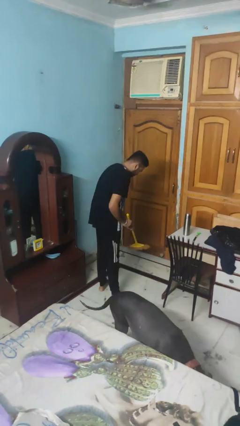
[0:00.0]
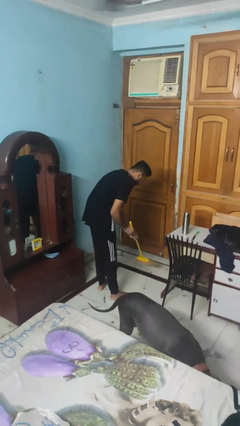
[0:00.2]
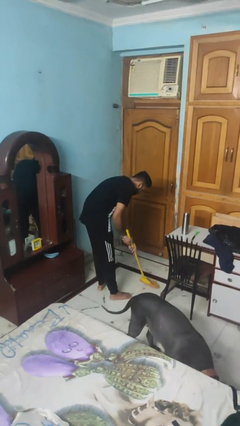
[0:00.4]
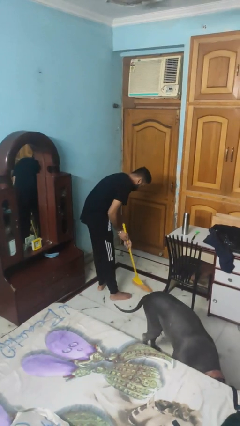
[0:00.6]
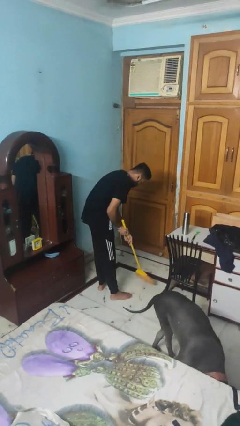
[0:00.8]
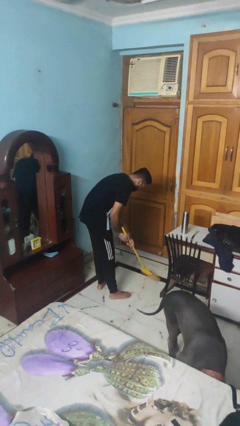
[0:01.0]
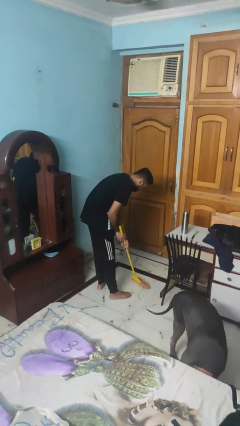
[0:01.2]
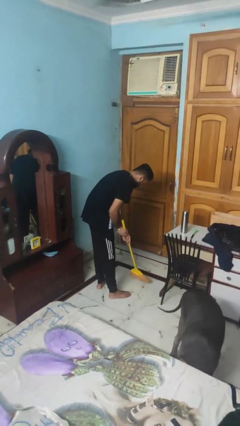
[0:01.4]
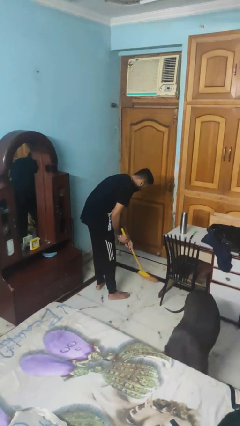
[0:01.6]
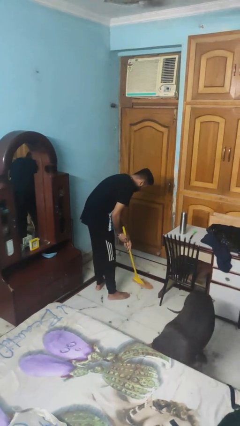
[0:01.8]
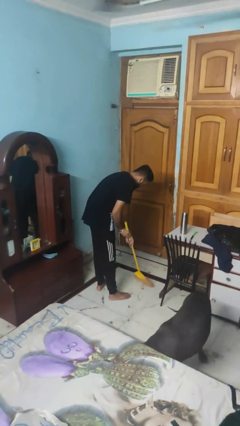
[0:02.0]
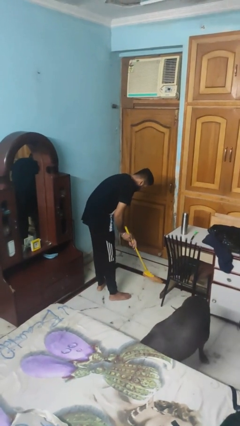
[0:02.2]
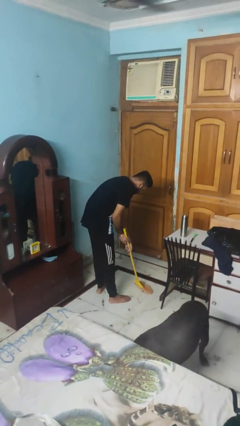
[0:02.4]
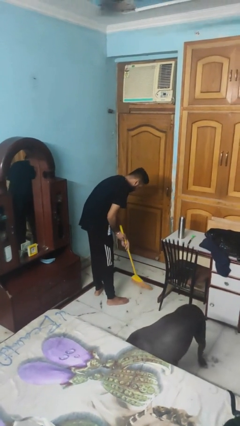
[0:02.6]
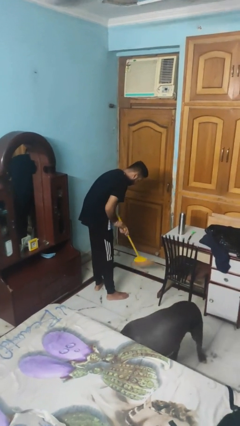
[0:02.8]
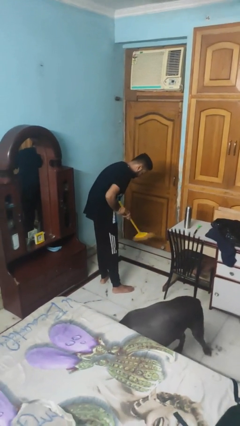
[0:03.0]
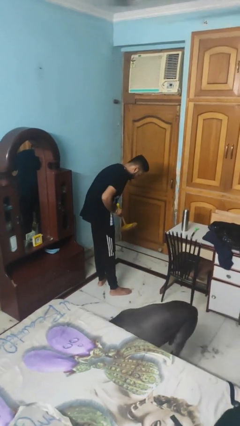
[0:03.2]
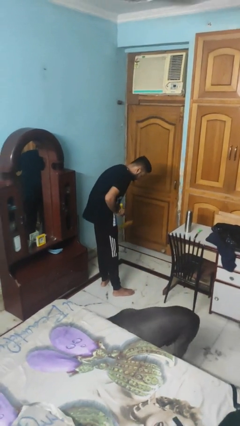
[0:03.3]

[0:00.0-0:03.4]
person sweeps floor

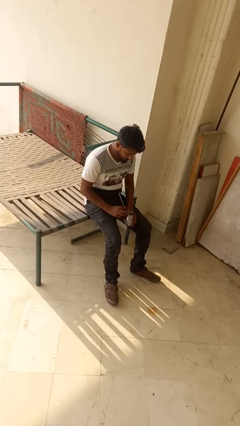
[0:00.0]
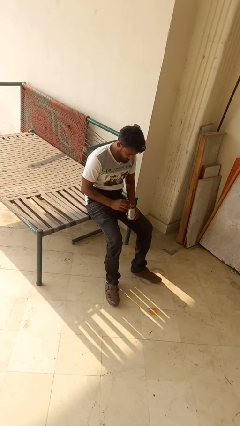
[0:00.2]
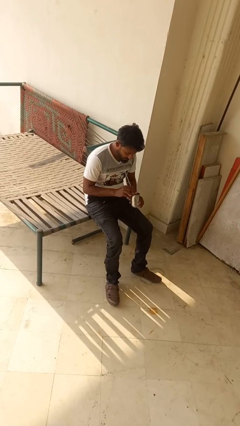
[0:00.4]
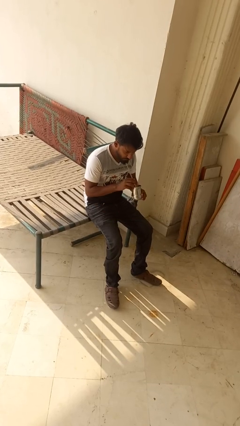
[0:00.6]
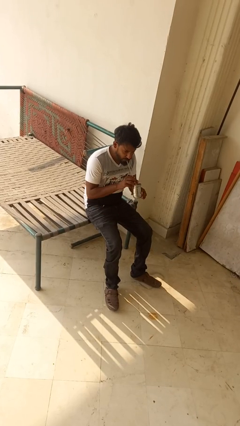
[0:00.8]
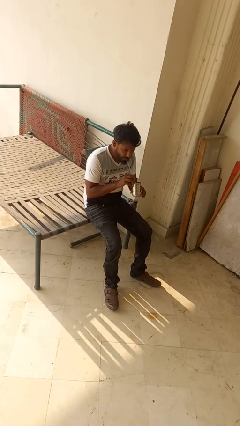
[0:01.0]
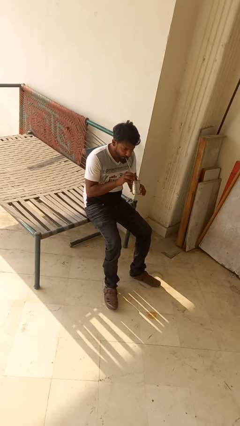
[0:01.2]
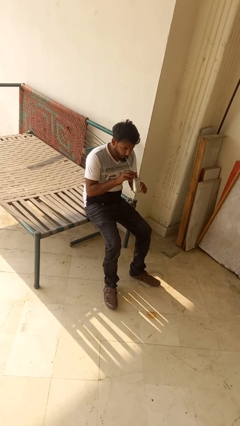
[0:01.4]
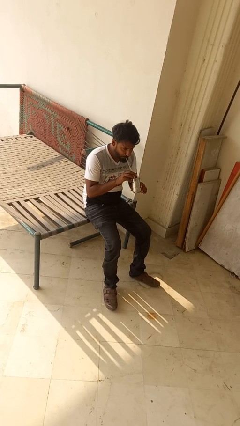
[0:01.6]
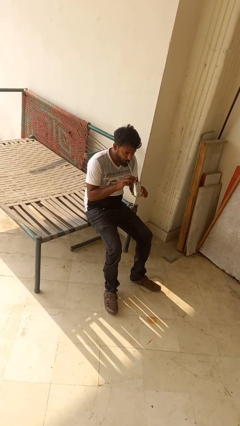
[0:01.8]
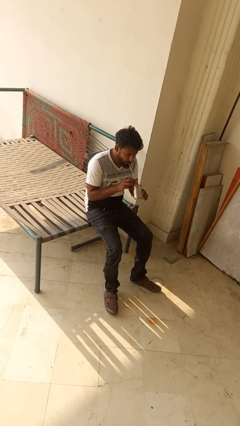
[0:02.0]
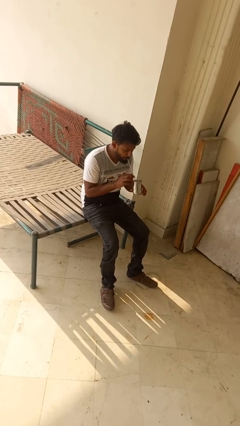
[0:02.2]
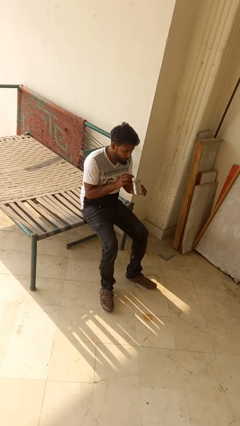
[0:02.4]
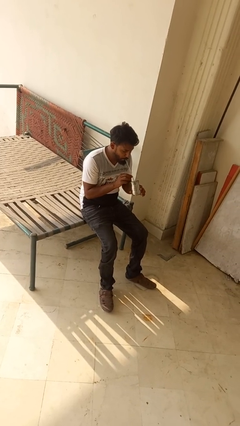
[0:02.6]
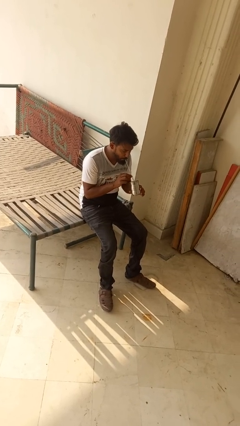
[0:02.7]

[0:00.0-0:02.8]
person drinks from straw

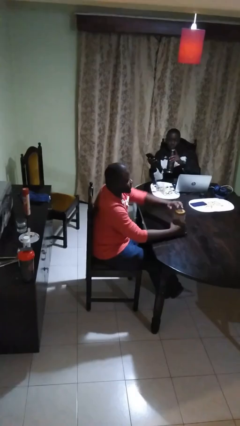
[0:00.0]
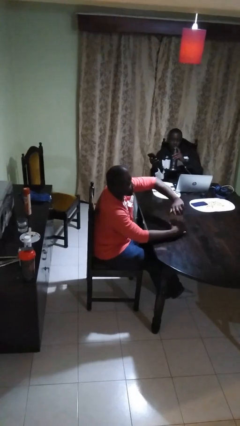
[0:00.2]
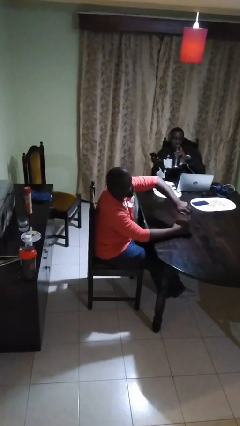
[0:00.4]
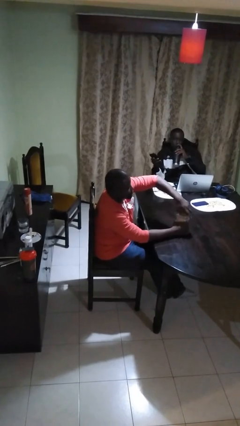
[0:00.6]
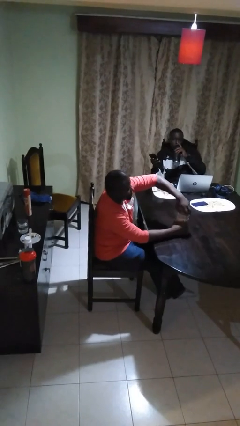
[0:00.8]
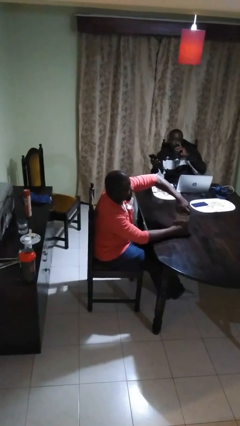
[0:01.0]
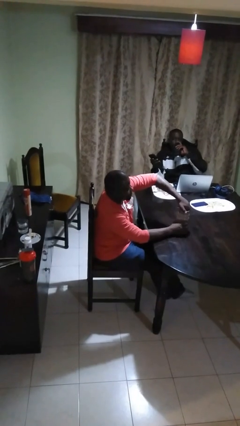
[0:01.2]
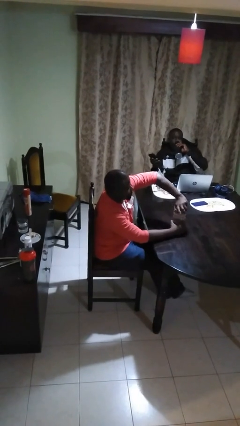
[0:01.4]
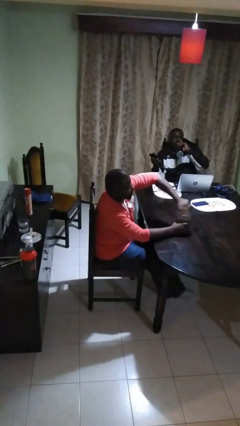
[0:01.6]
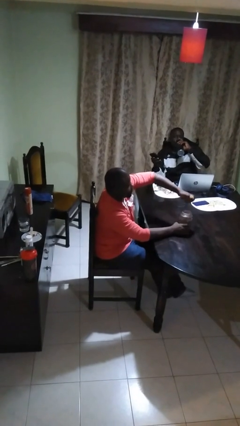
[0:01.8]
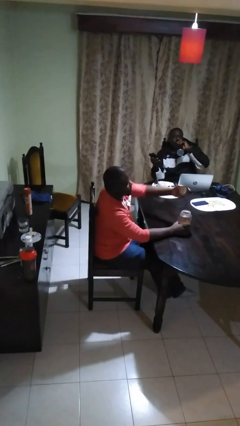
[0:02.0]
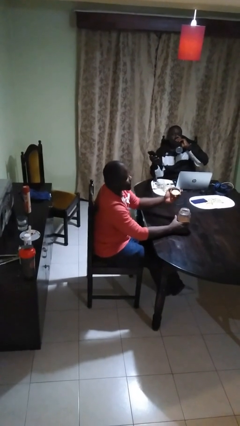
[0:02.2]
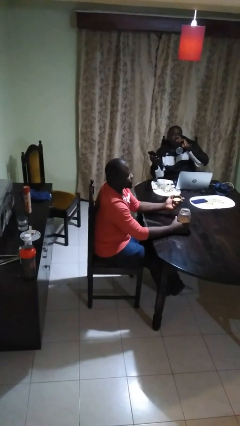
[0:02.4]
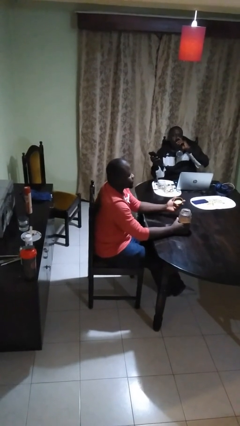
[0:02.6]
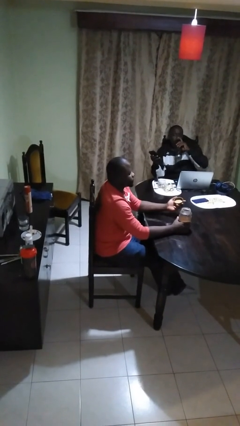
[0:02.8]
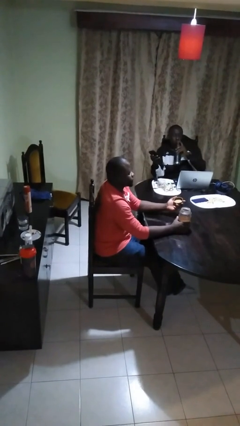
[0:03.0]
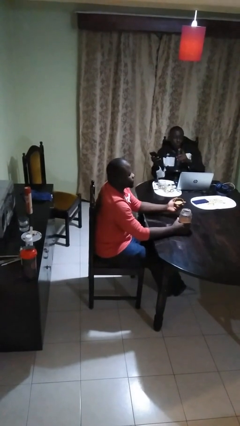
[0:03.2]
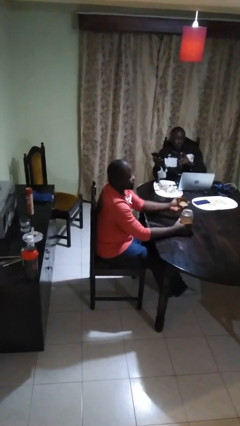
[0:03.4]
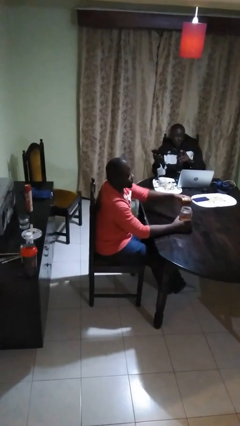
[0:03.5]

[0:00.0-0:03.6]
person opens jar

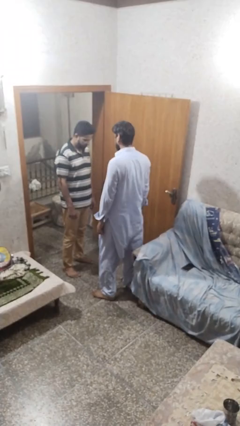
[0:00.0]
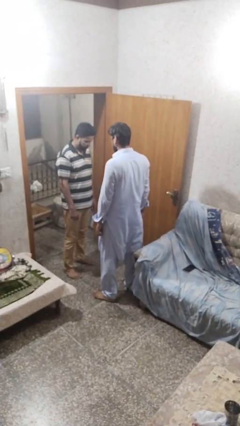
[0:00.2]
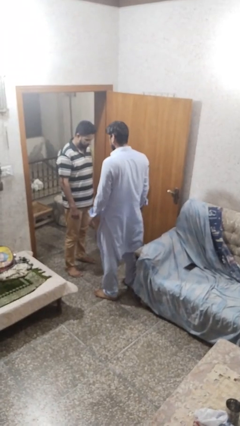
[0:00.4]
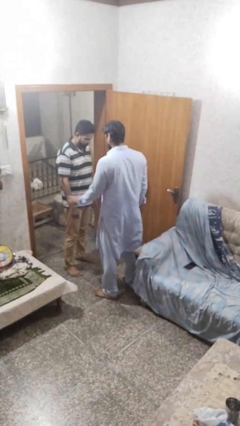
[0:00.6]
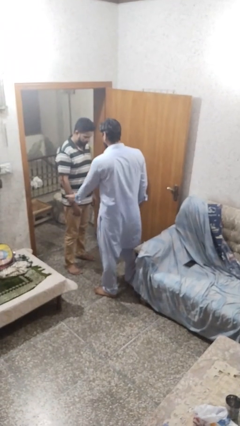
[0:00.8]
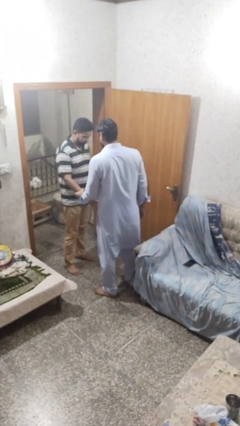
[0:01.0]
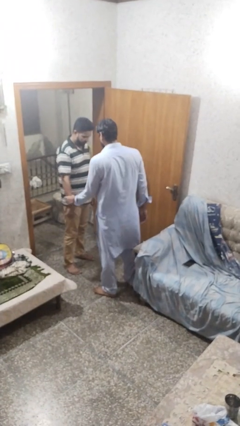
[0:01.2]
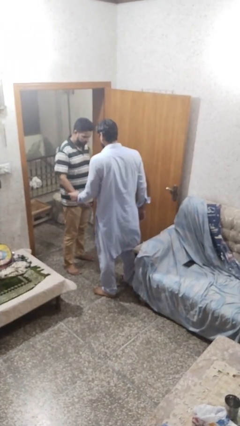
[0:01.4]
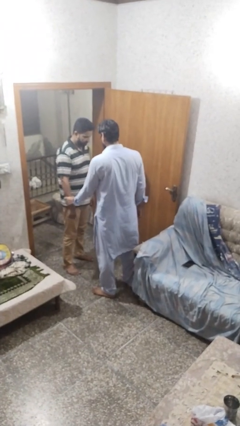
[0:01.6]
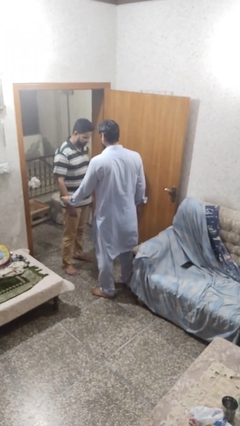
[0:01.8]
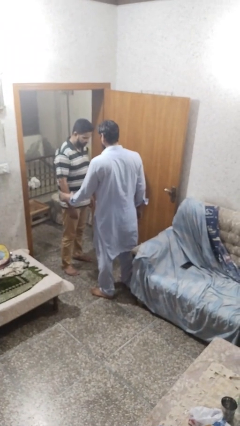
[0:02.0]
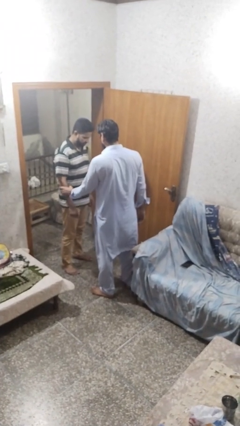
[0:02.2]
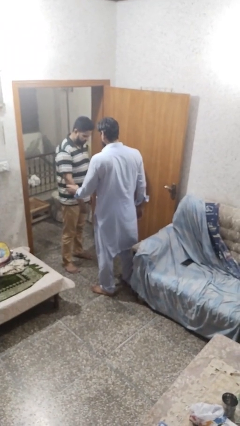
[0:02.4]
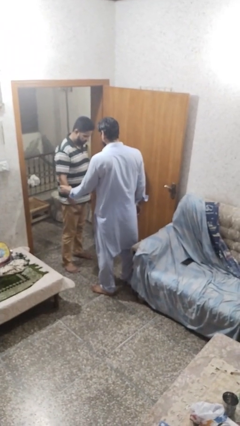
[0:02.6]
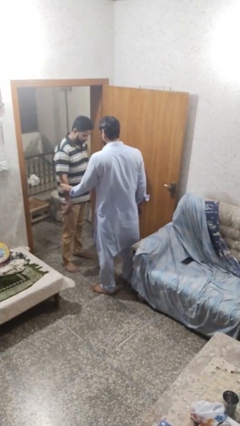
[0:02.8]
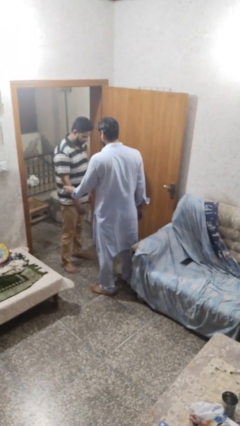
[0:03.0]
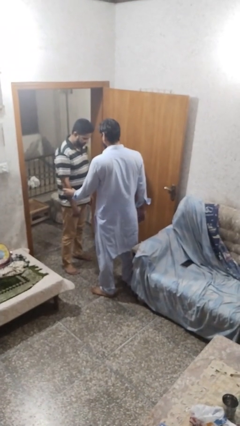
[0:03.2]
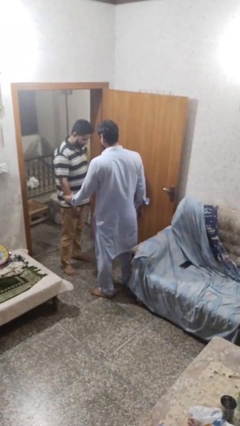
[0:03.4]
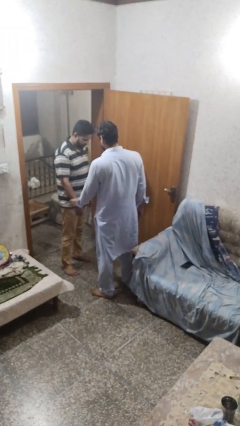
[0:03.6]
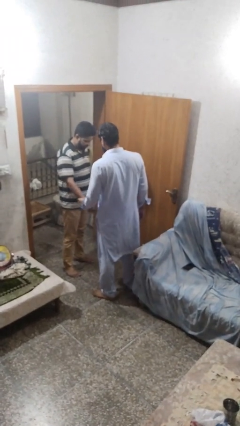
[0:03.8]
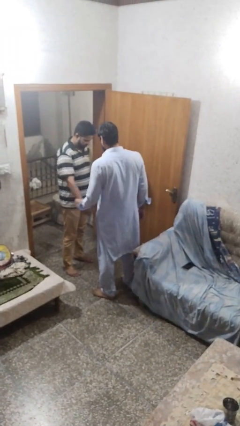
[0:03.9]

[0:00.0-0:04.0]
person grabs person by forearm

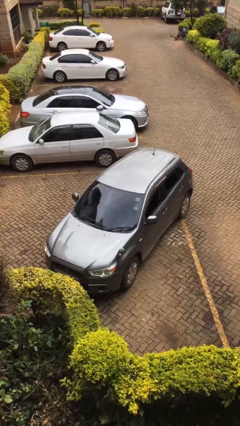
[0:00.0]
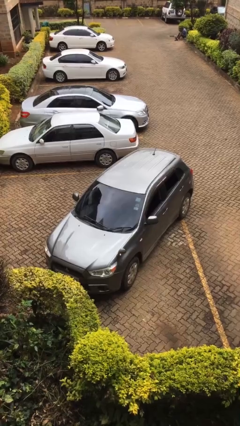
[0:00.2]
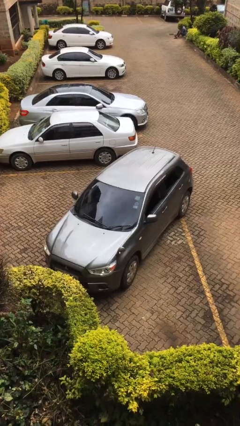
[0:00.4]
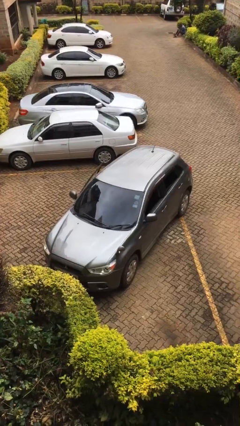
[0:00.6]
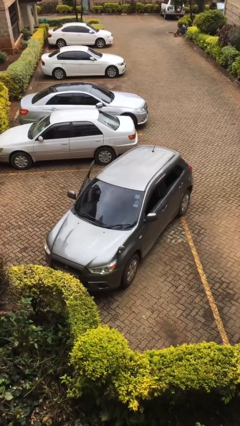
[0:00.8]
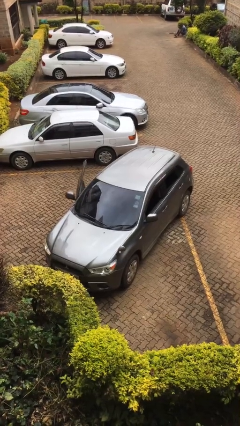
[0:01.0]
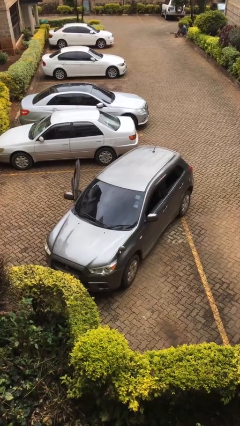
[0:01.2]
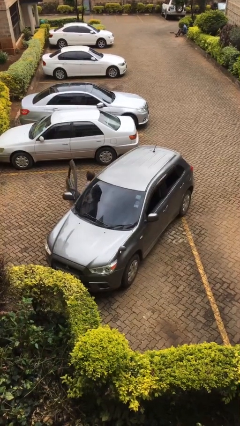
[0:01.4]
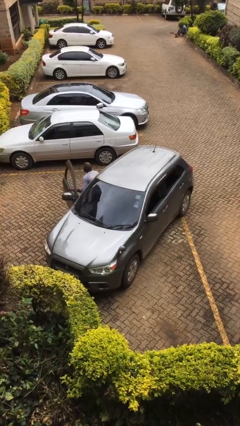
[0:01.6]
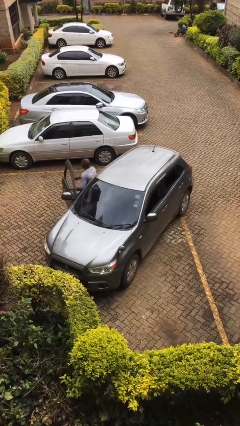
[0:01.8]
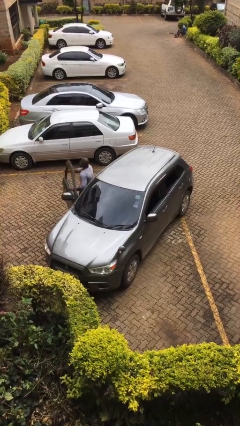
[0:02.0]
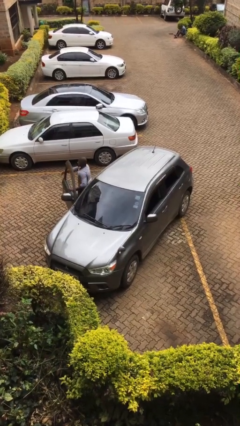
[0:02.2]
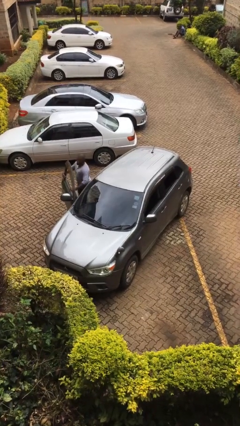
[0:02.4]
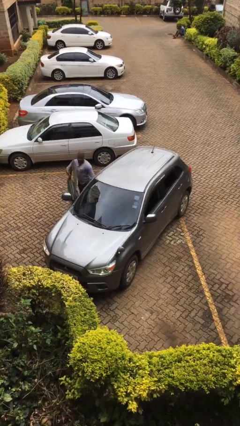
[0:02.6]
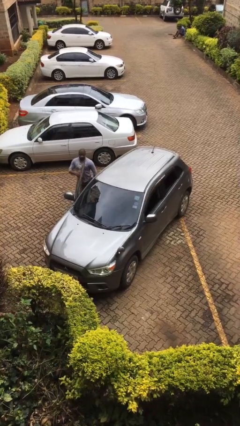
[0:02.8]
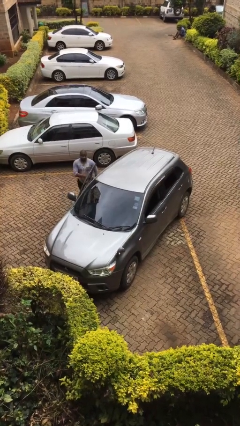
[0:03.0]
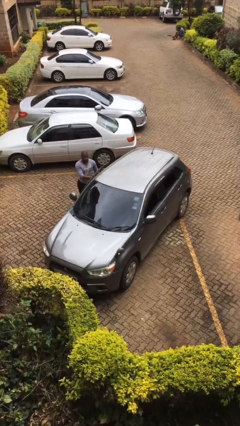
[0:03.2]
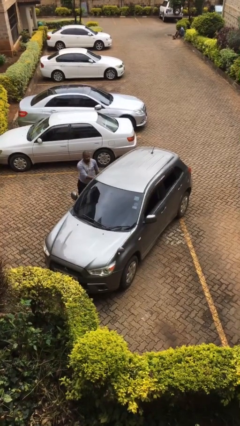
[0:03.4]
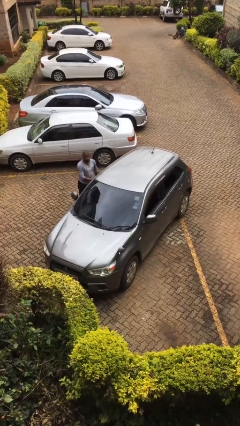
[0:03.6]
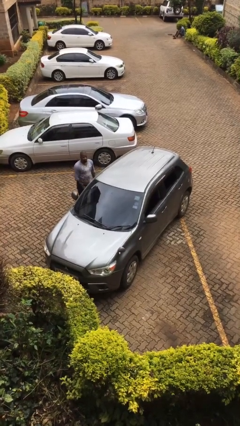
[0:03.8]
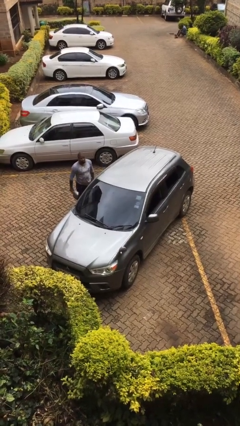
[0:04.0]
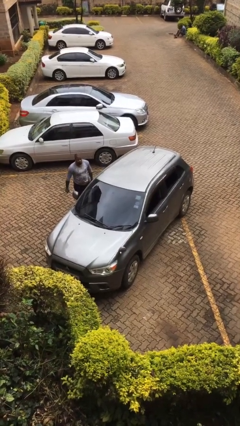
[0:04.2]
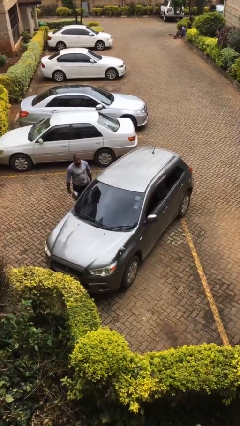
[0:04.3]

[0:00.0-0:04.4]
car drops off person
